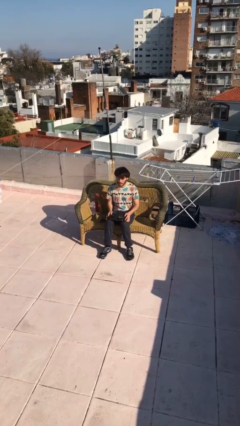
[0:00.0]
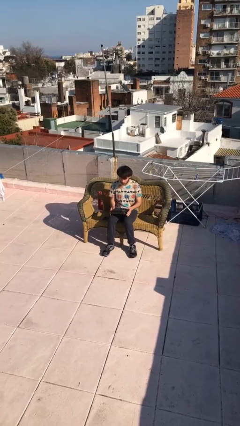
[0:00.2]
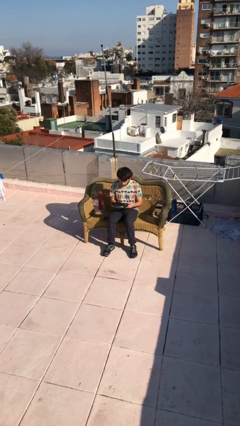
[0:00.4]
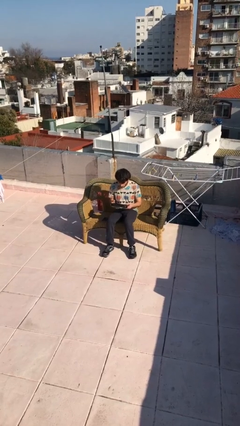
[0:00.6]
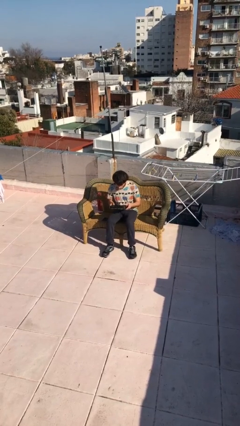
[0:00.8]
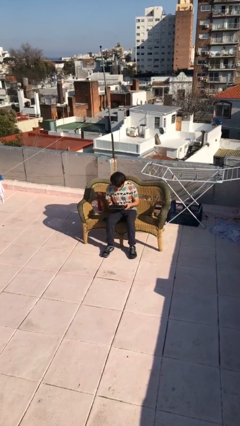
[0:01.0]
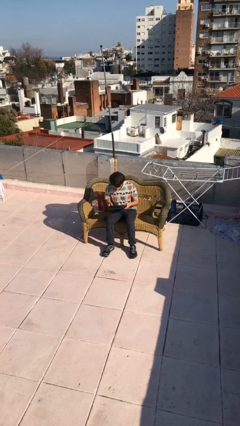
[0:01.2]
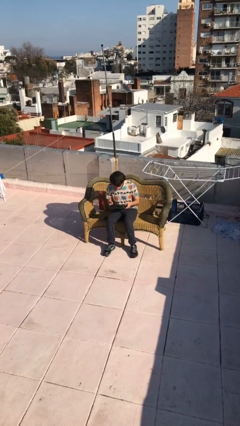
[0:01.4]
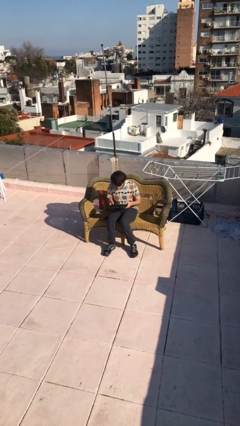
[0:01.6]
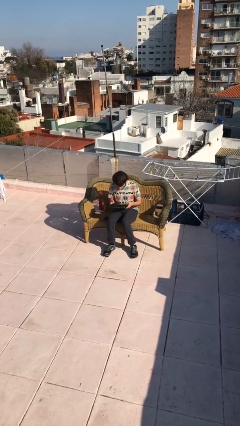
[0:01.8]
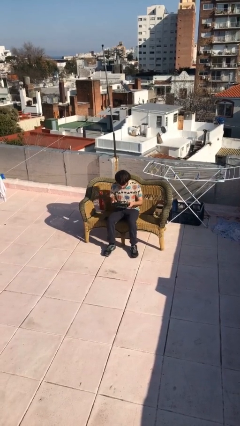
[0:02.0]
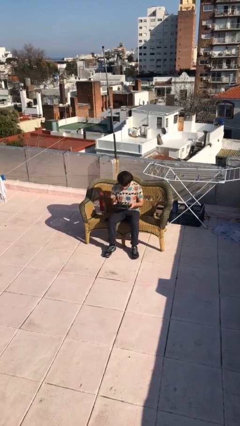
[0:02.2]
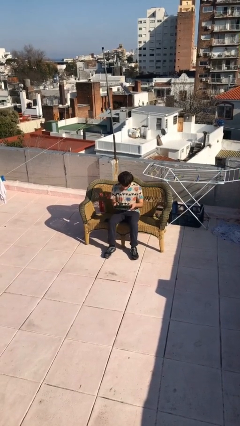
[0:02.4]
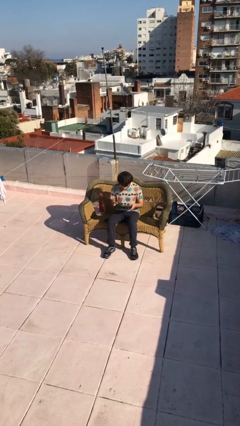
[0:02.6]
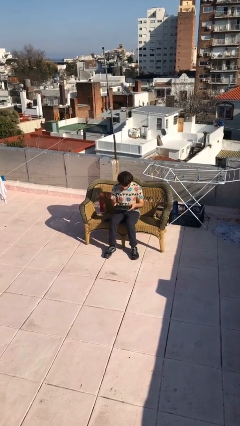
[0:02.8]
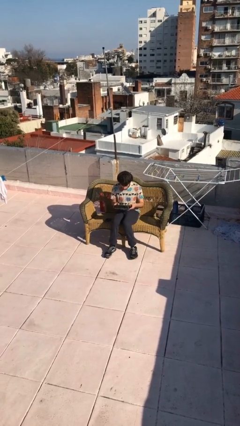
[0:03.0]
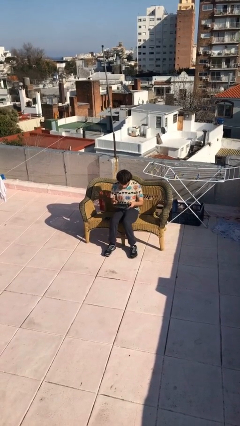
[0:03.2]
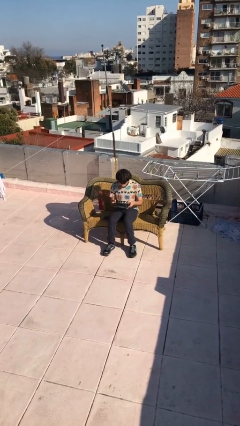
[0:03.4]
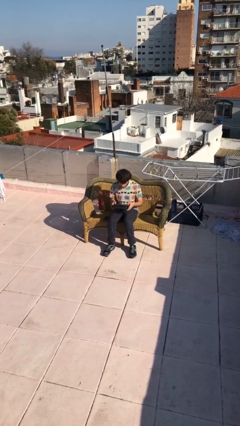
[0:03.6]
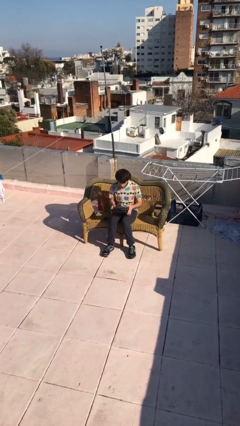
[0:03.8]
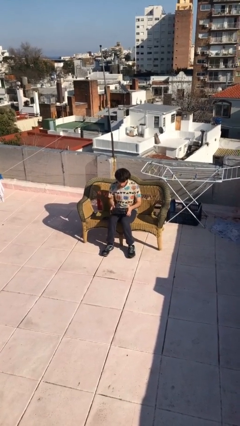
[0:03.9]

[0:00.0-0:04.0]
person interacts with handheld game

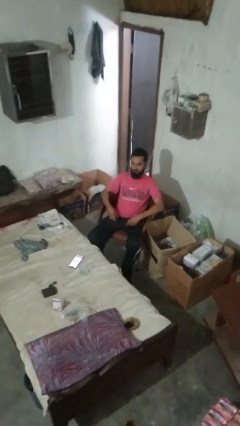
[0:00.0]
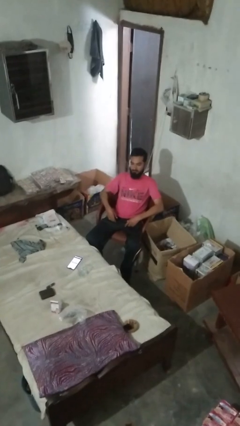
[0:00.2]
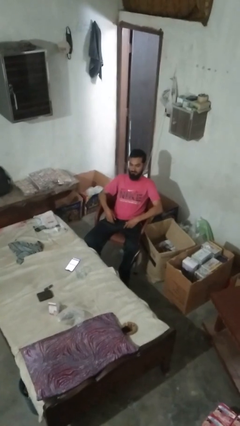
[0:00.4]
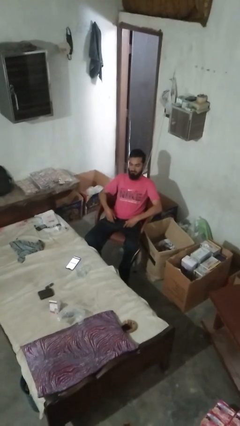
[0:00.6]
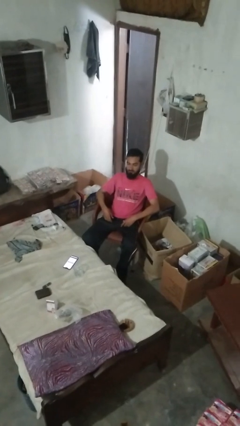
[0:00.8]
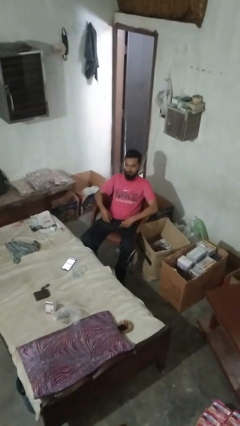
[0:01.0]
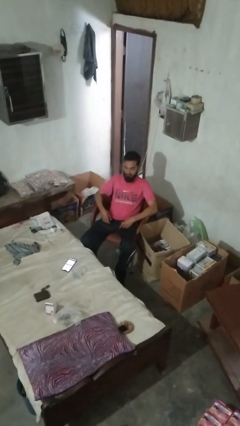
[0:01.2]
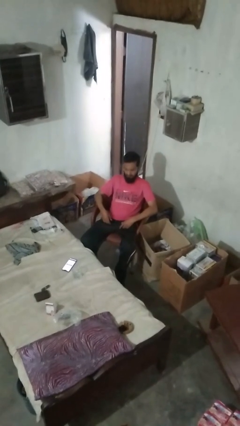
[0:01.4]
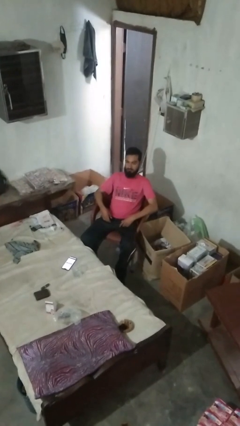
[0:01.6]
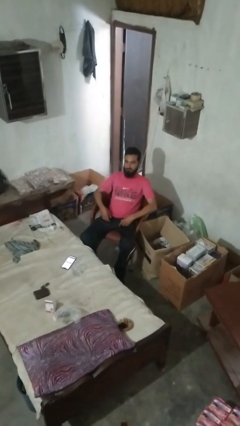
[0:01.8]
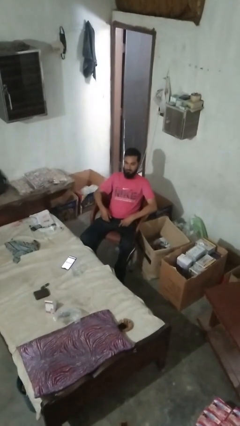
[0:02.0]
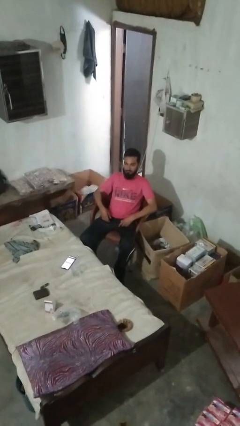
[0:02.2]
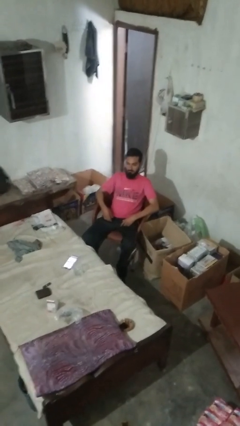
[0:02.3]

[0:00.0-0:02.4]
person nods head

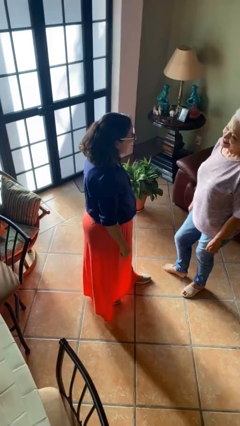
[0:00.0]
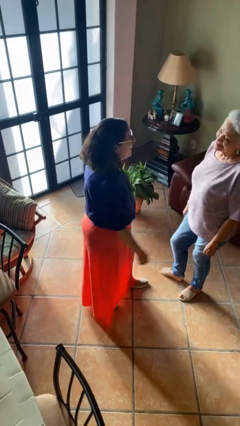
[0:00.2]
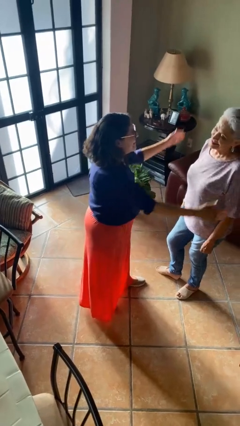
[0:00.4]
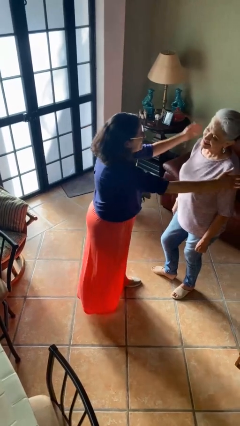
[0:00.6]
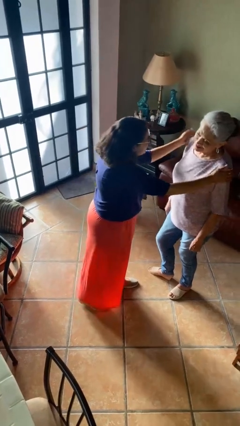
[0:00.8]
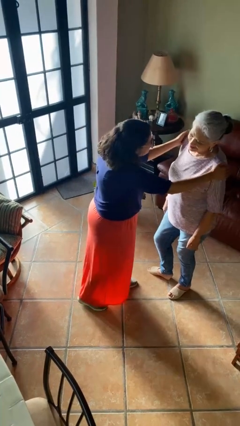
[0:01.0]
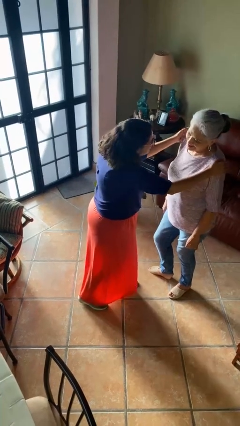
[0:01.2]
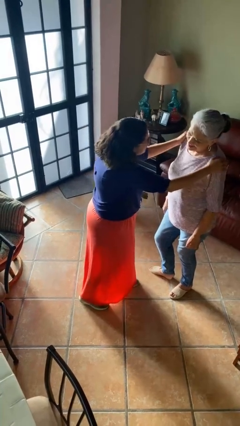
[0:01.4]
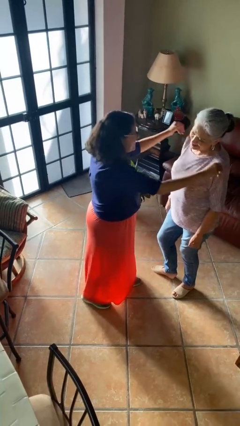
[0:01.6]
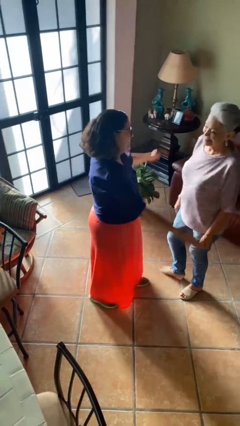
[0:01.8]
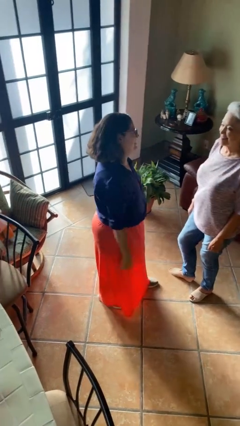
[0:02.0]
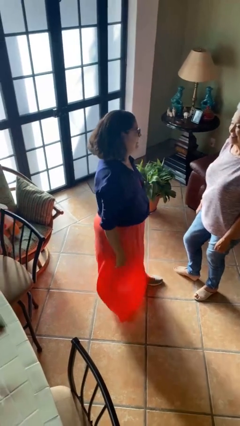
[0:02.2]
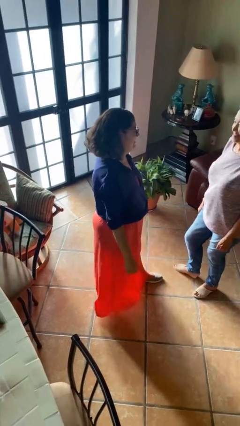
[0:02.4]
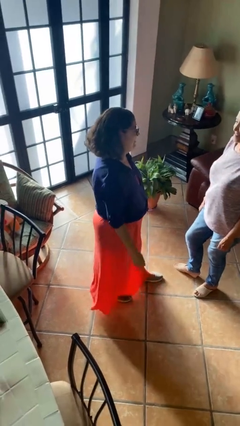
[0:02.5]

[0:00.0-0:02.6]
person pounds shoulders of person

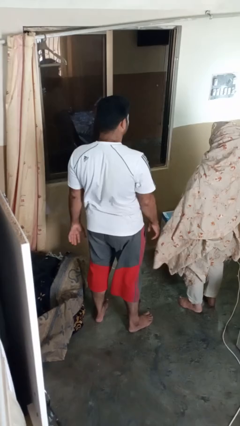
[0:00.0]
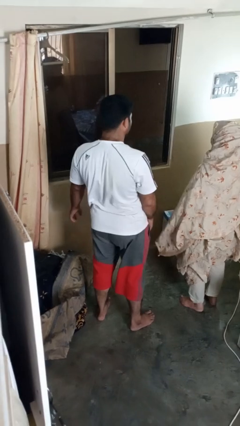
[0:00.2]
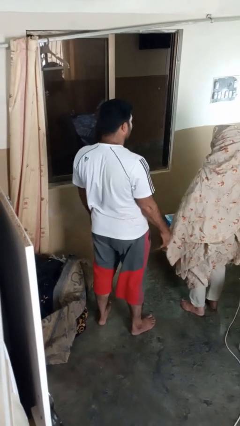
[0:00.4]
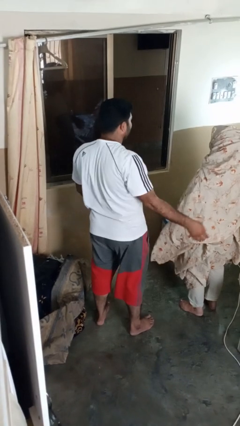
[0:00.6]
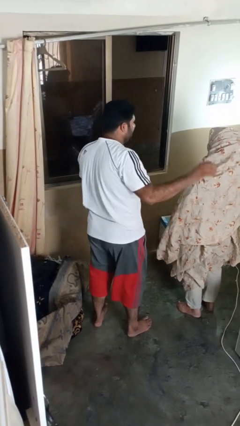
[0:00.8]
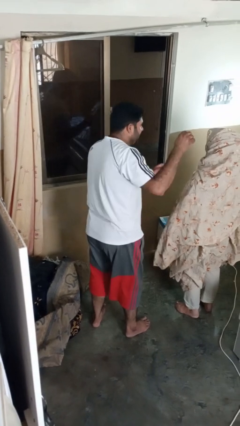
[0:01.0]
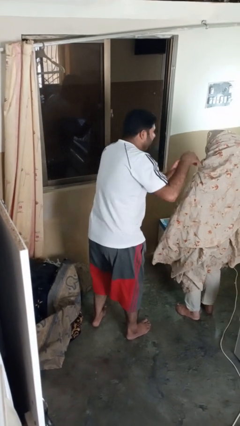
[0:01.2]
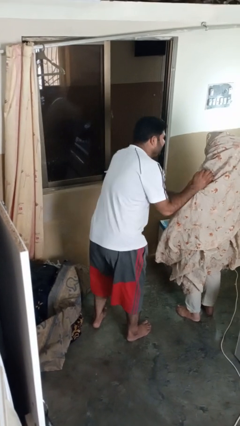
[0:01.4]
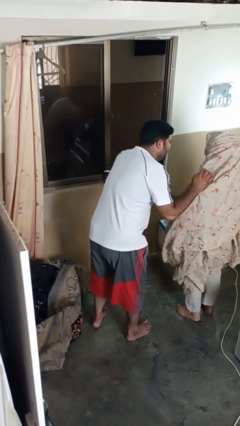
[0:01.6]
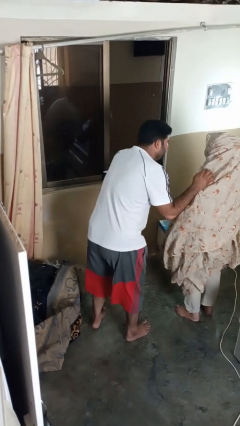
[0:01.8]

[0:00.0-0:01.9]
person laughs with person

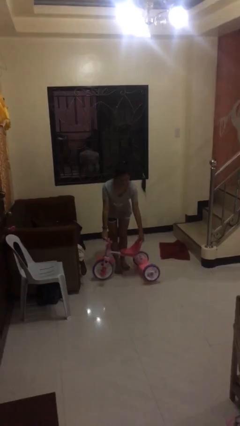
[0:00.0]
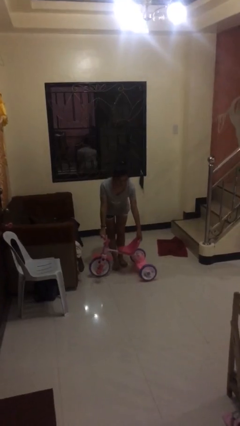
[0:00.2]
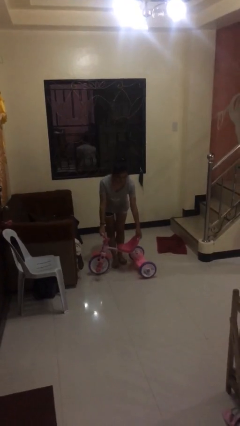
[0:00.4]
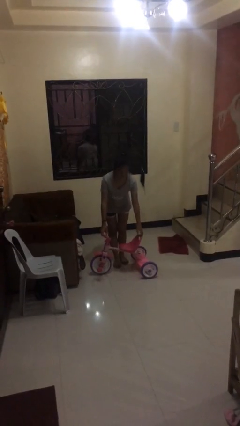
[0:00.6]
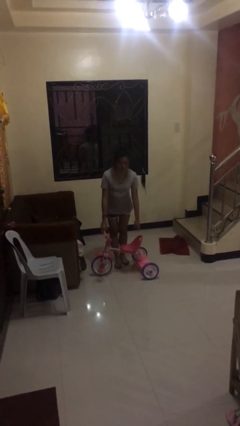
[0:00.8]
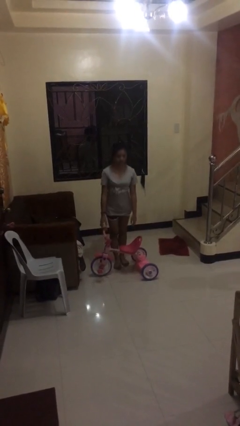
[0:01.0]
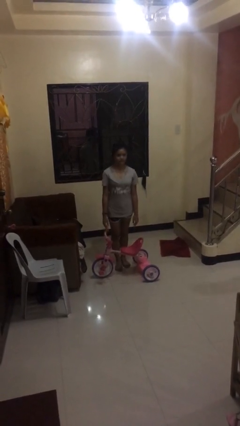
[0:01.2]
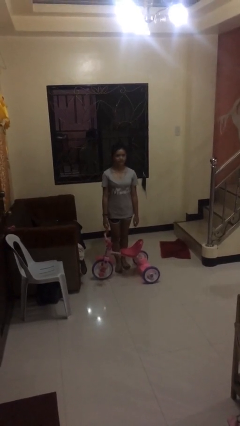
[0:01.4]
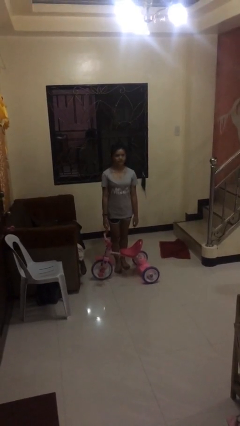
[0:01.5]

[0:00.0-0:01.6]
person puts down object on floor

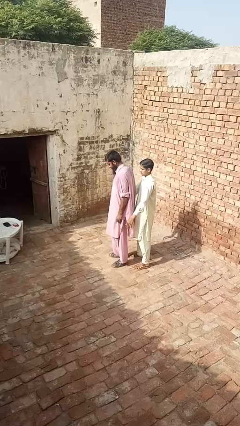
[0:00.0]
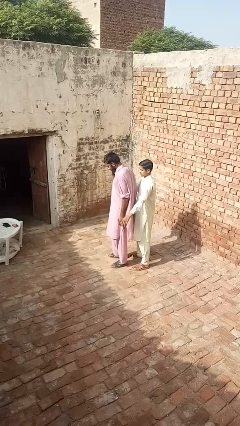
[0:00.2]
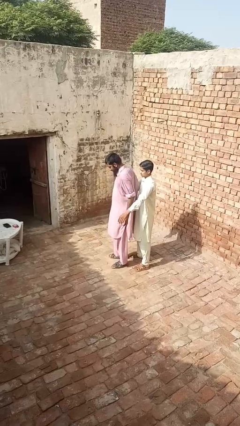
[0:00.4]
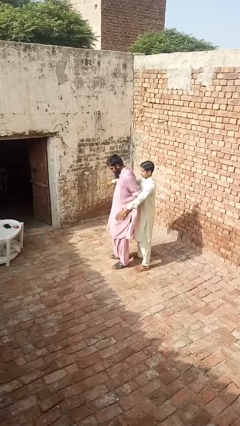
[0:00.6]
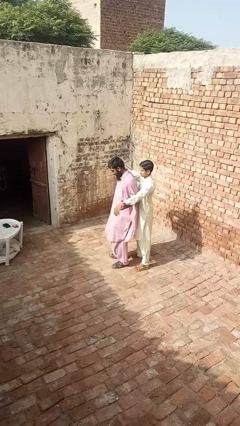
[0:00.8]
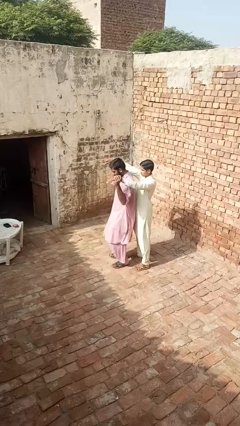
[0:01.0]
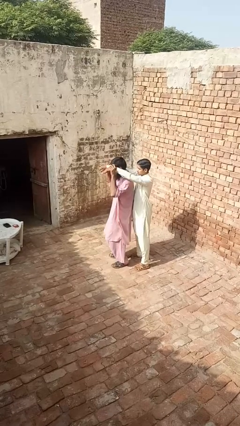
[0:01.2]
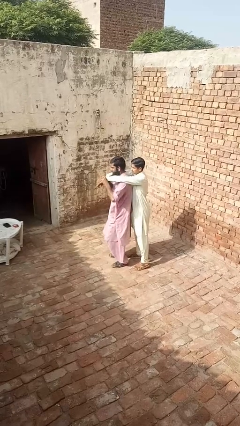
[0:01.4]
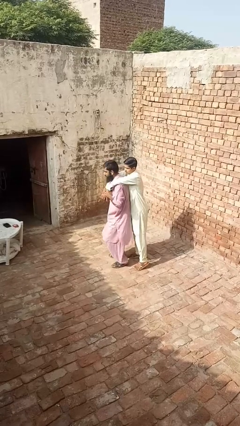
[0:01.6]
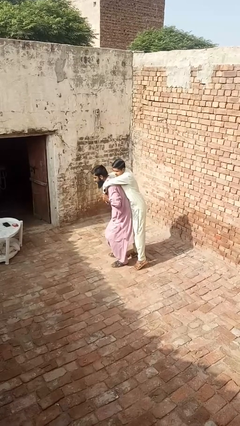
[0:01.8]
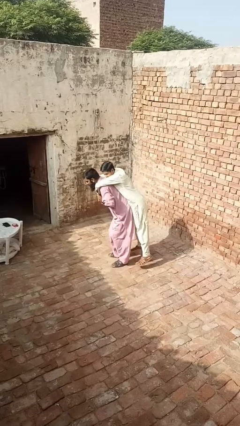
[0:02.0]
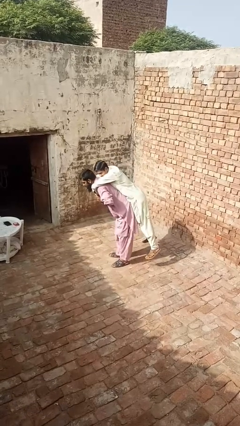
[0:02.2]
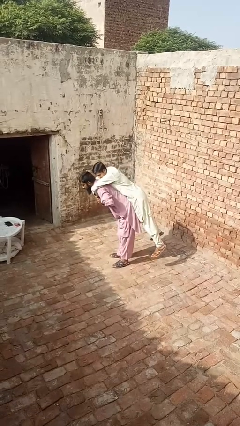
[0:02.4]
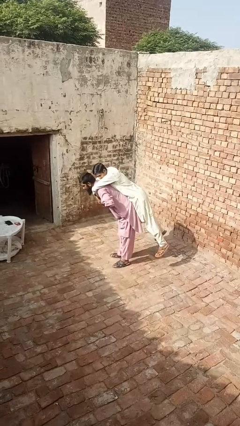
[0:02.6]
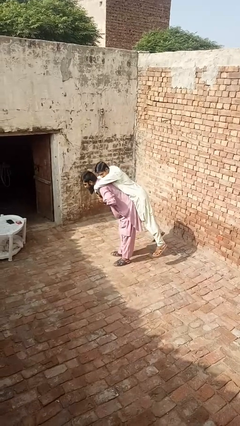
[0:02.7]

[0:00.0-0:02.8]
person picks up person

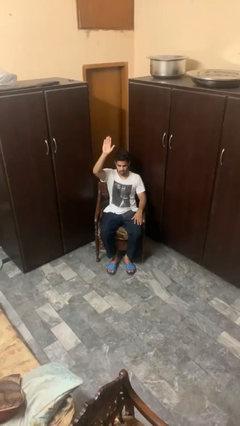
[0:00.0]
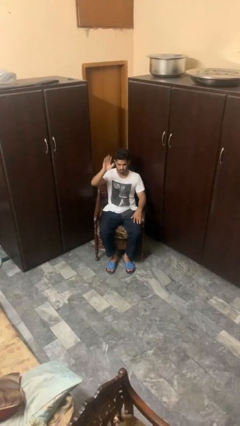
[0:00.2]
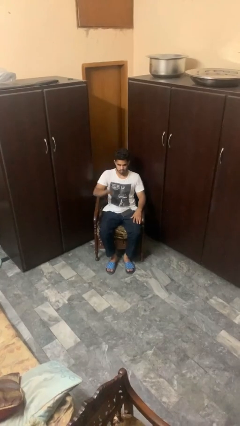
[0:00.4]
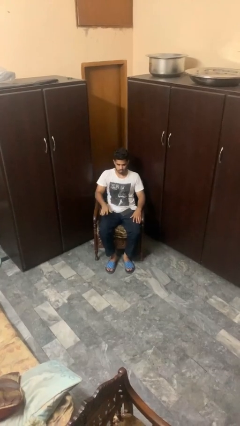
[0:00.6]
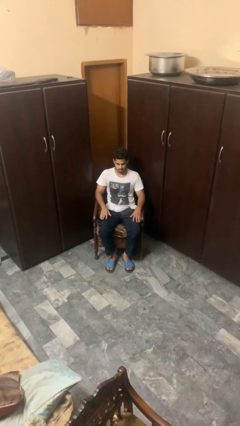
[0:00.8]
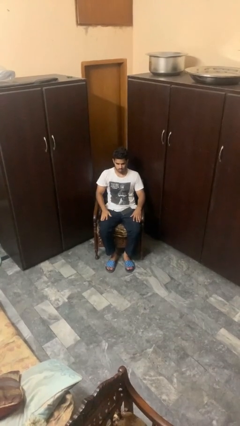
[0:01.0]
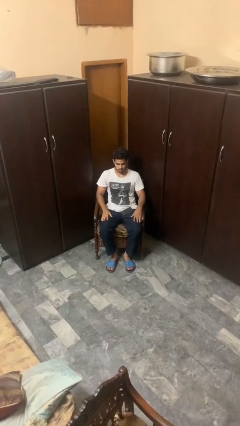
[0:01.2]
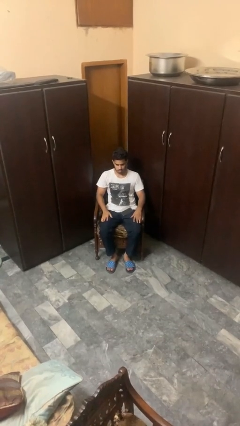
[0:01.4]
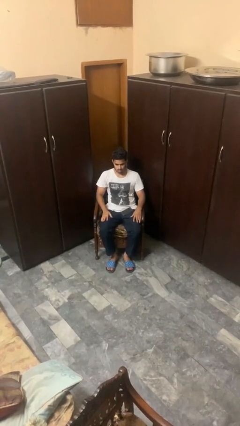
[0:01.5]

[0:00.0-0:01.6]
person gestures lower hand

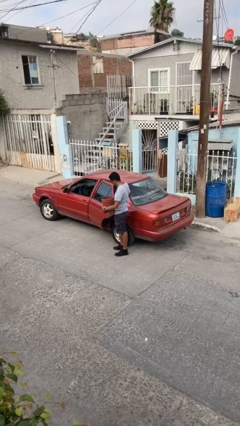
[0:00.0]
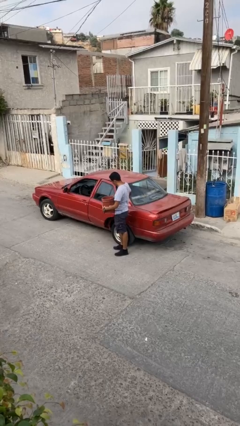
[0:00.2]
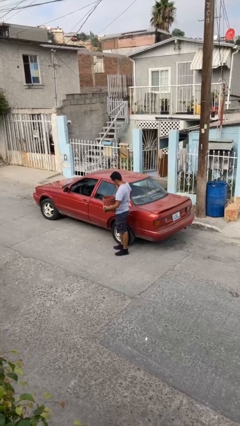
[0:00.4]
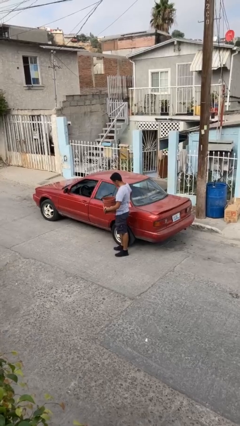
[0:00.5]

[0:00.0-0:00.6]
person closes car door
